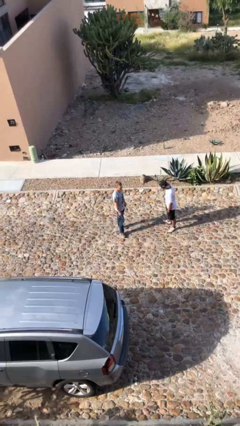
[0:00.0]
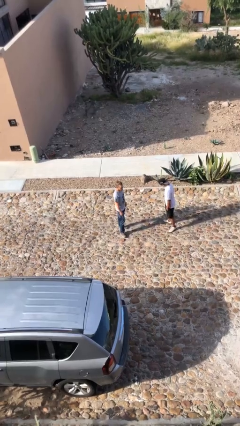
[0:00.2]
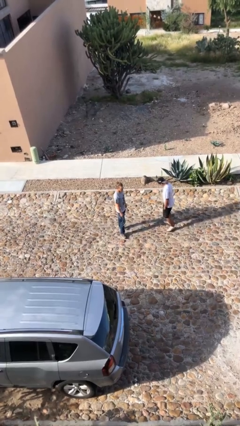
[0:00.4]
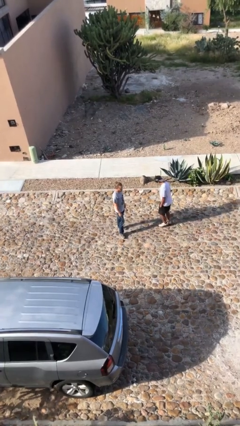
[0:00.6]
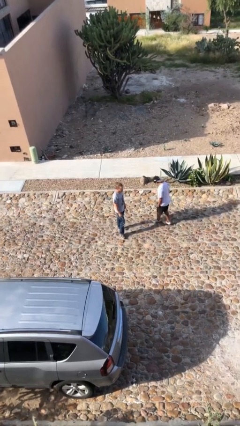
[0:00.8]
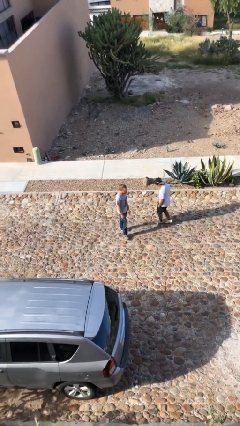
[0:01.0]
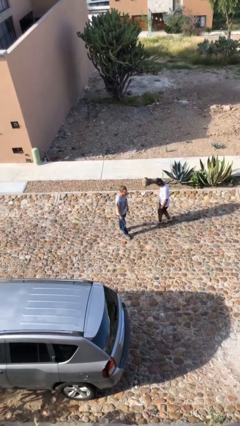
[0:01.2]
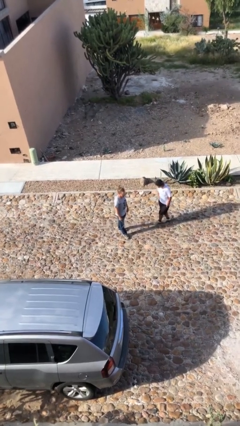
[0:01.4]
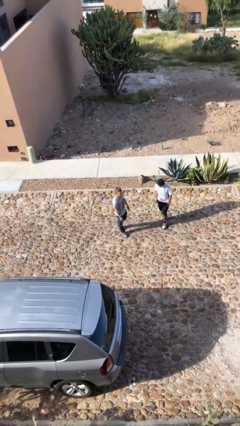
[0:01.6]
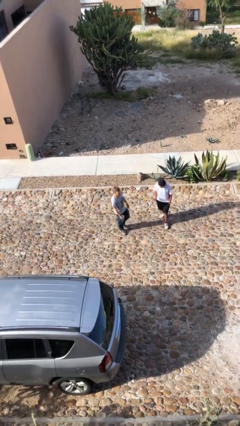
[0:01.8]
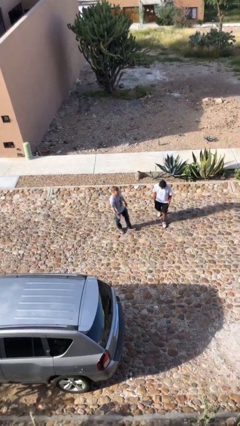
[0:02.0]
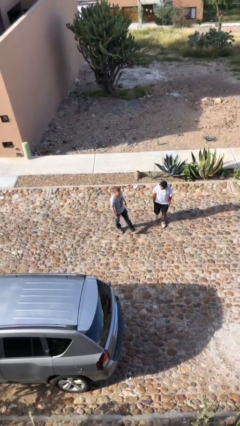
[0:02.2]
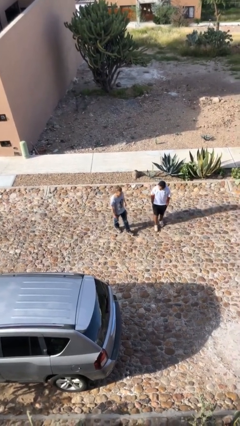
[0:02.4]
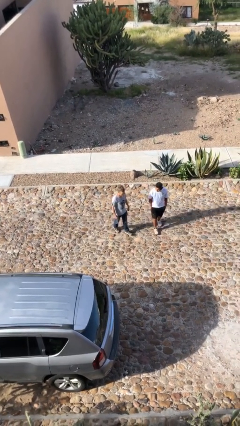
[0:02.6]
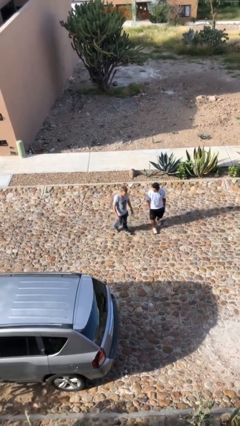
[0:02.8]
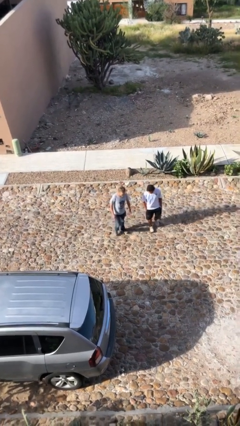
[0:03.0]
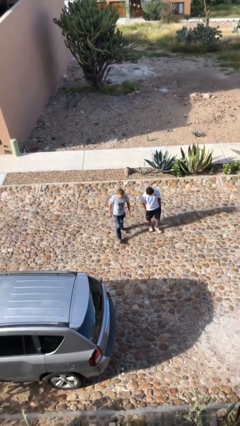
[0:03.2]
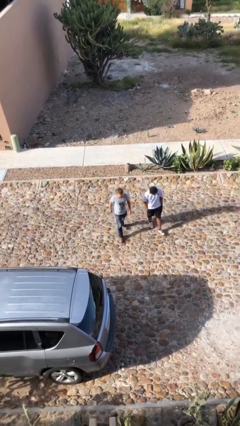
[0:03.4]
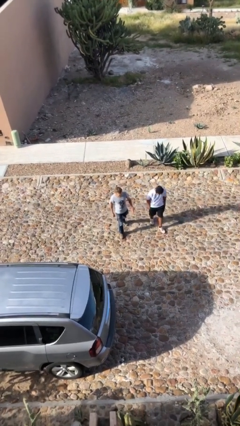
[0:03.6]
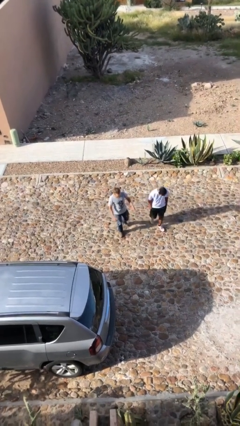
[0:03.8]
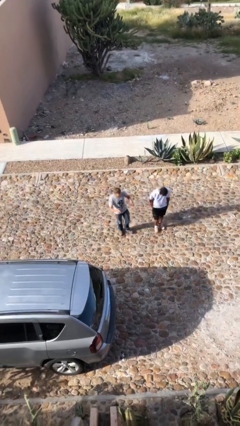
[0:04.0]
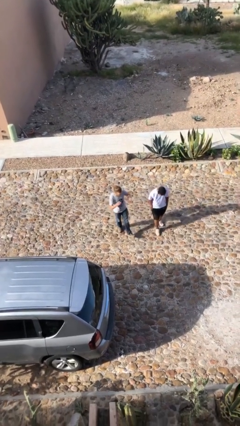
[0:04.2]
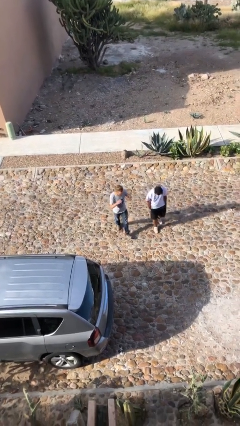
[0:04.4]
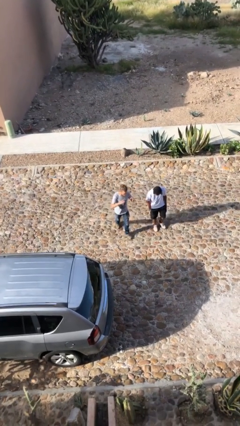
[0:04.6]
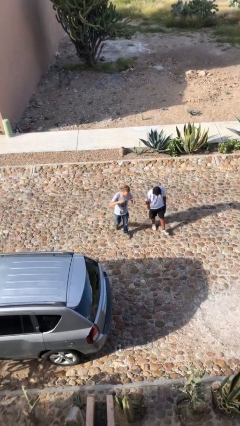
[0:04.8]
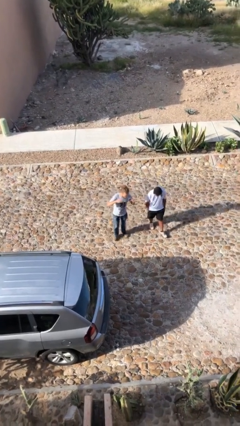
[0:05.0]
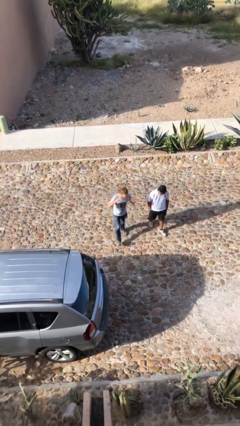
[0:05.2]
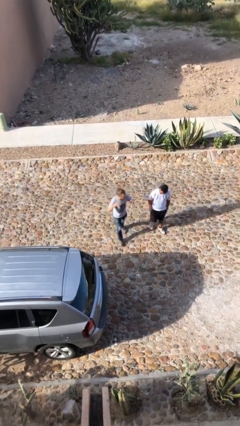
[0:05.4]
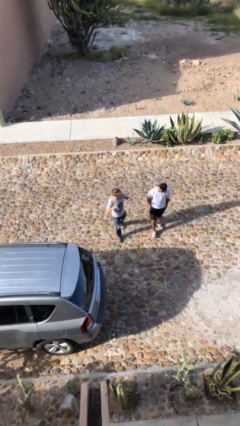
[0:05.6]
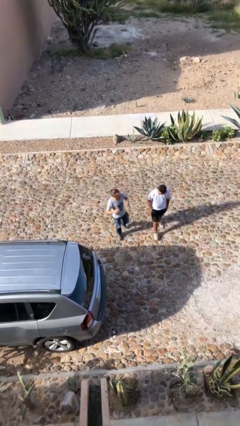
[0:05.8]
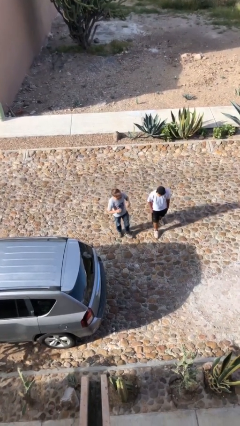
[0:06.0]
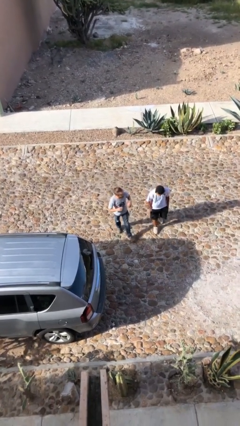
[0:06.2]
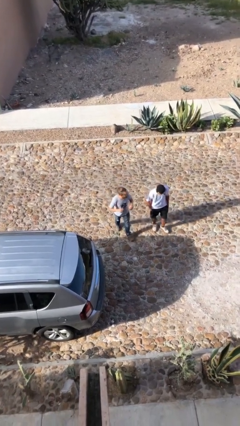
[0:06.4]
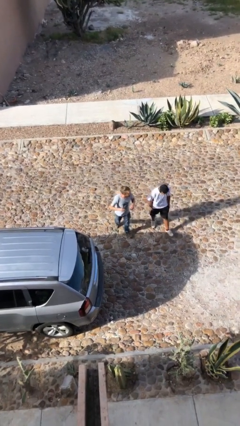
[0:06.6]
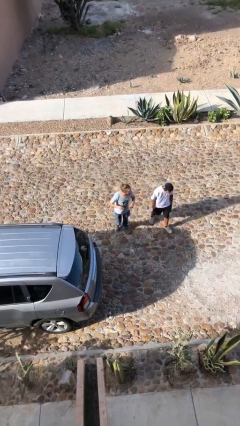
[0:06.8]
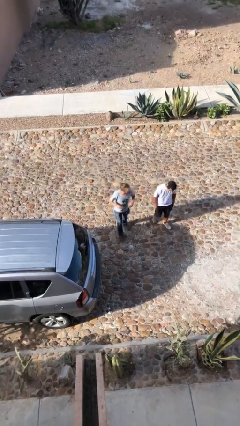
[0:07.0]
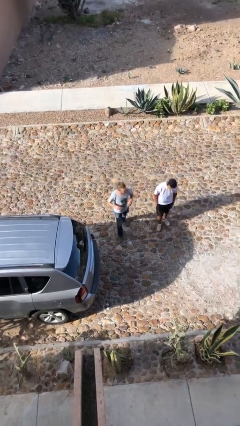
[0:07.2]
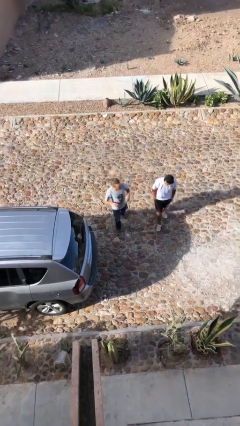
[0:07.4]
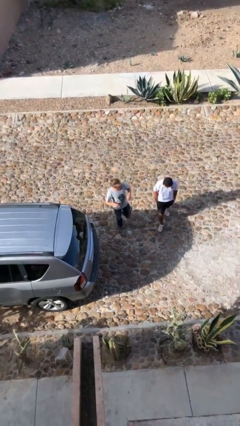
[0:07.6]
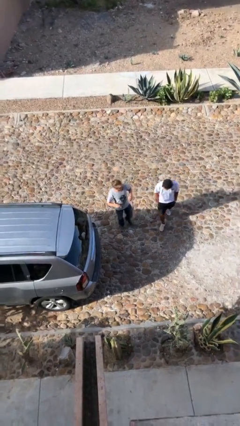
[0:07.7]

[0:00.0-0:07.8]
person talks to person

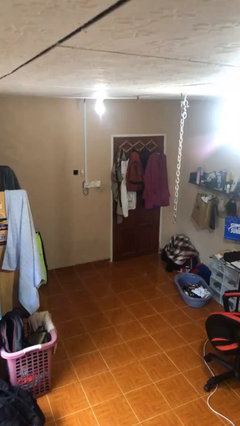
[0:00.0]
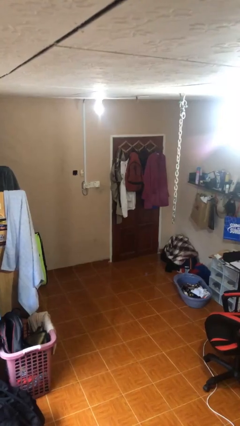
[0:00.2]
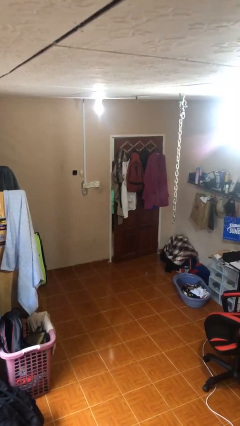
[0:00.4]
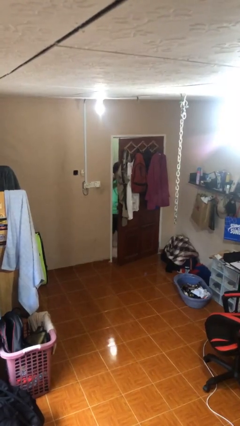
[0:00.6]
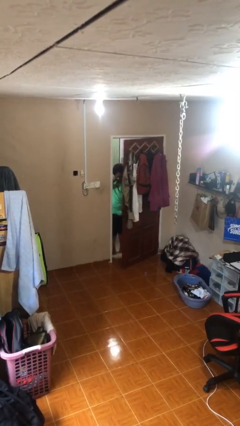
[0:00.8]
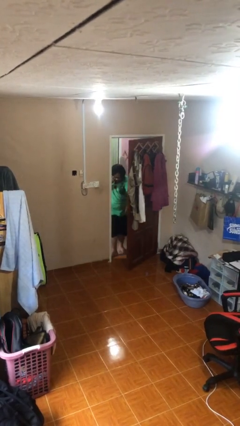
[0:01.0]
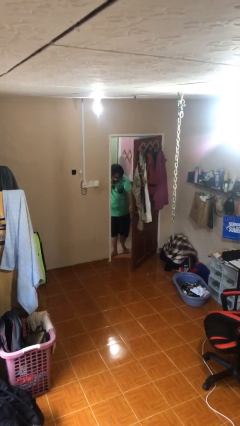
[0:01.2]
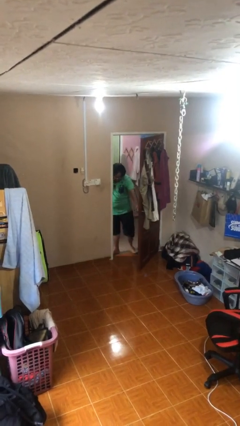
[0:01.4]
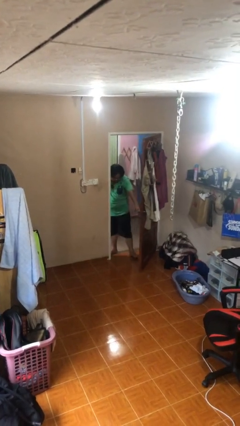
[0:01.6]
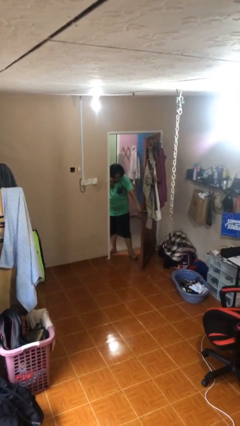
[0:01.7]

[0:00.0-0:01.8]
person opens facility door

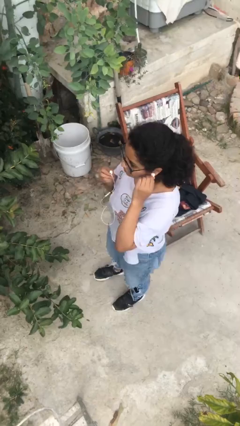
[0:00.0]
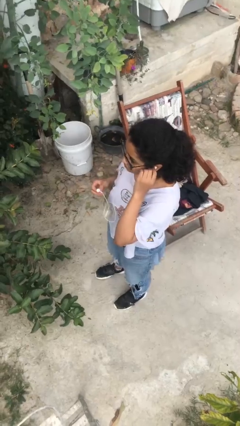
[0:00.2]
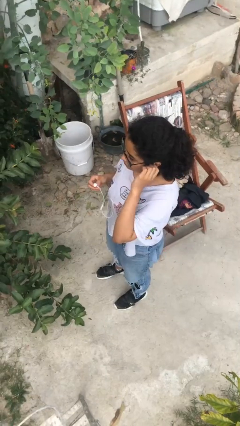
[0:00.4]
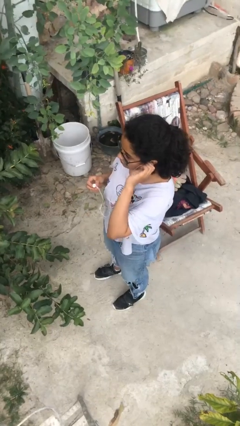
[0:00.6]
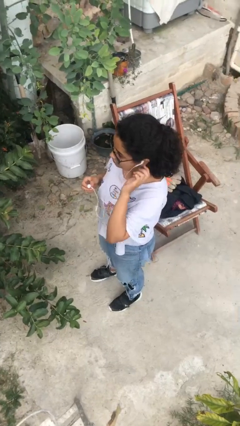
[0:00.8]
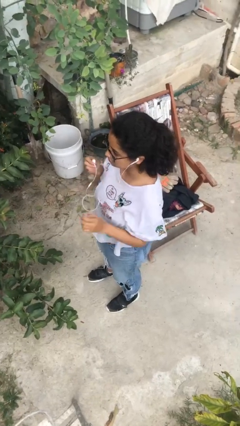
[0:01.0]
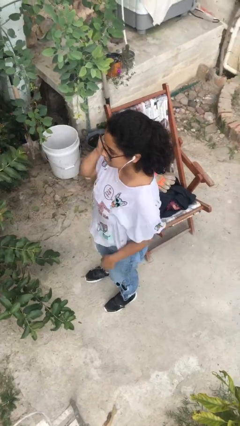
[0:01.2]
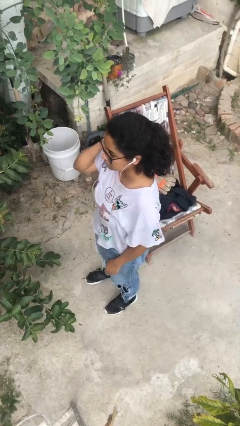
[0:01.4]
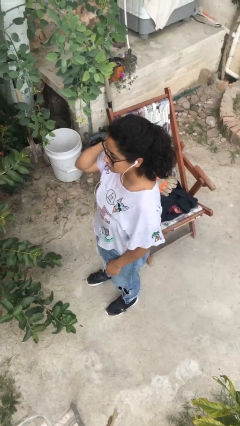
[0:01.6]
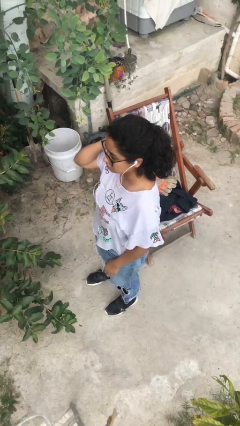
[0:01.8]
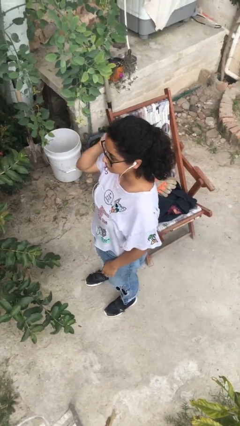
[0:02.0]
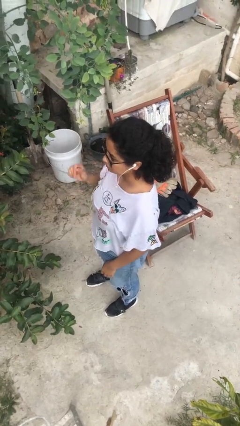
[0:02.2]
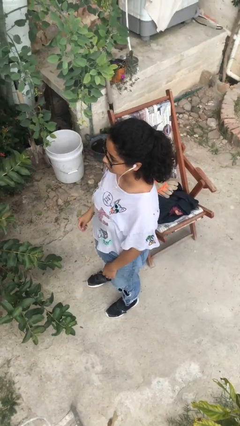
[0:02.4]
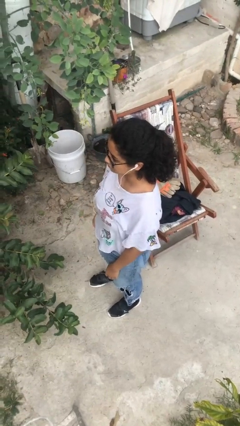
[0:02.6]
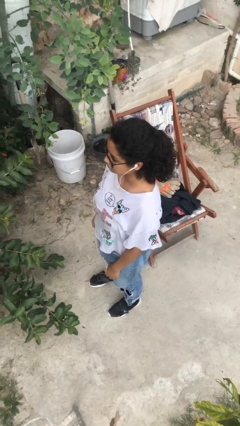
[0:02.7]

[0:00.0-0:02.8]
person puts on headphones

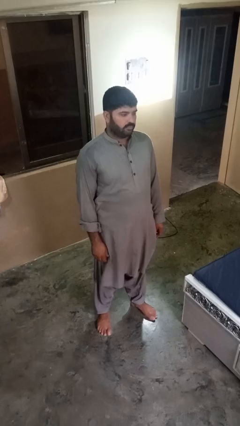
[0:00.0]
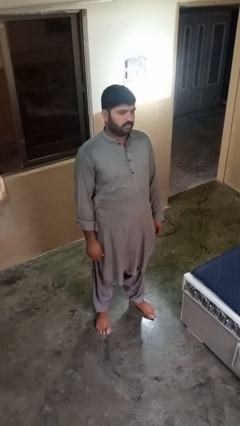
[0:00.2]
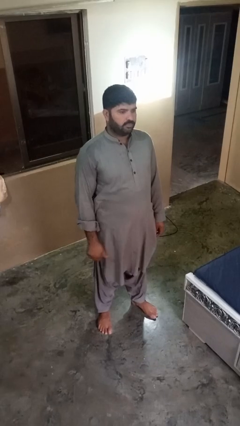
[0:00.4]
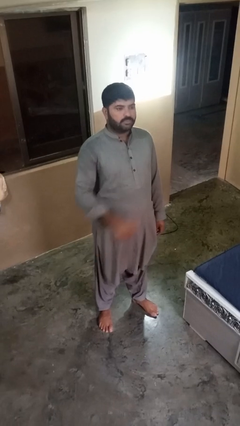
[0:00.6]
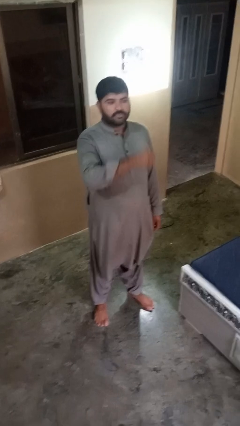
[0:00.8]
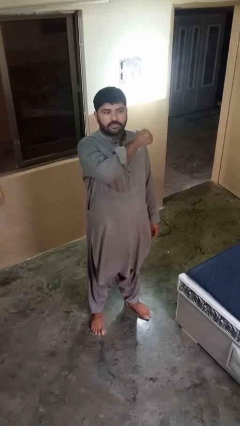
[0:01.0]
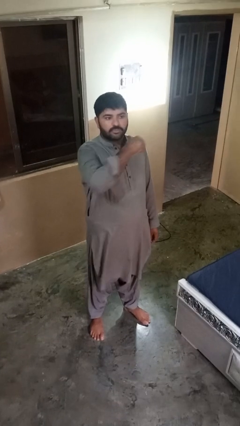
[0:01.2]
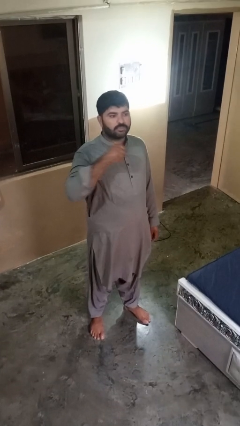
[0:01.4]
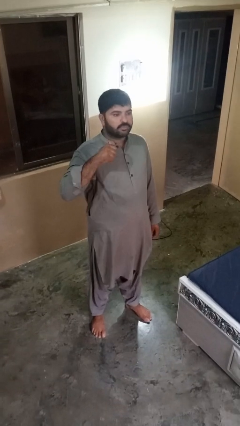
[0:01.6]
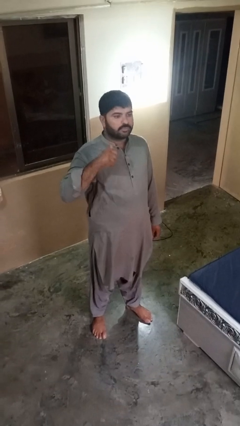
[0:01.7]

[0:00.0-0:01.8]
person gestures cut

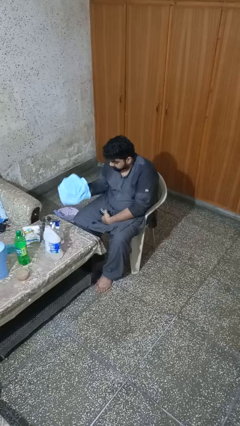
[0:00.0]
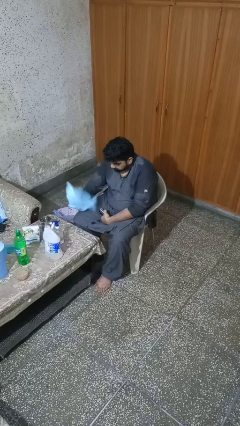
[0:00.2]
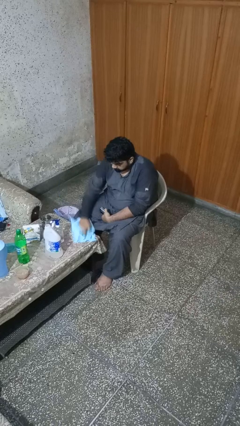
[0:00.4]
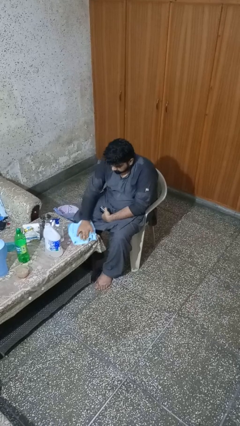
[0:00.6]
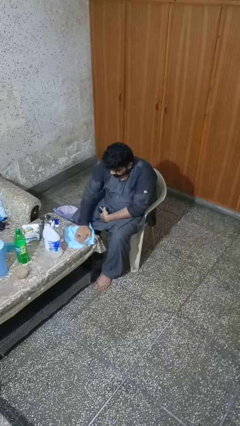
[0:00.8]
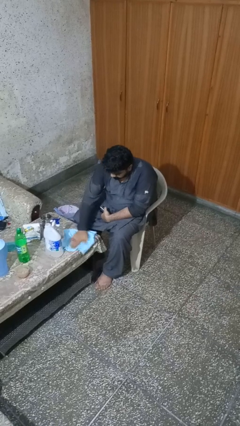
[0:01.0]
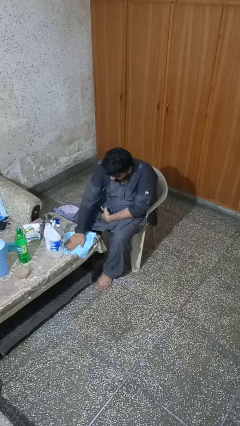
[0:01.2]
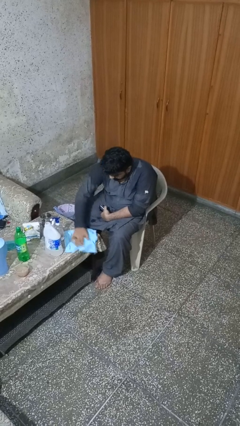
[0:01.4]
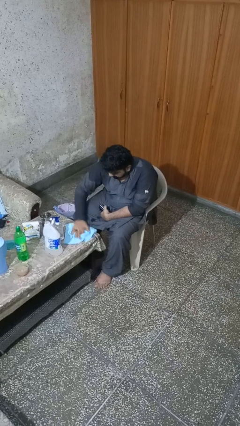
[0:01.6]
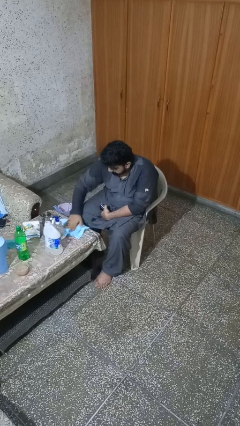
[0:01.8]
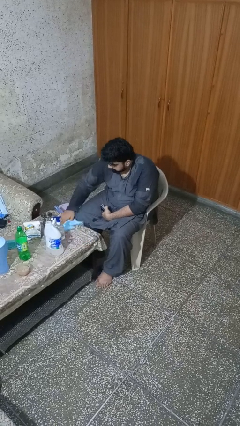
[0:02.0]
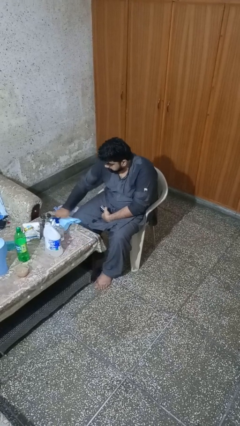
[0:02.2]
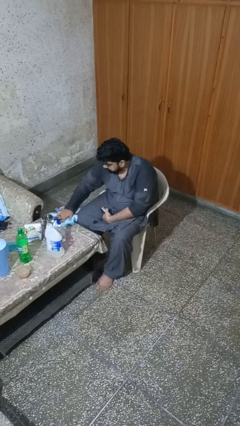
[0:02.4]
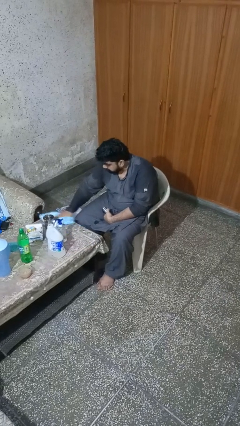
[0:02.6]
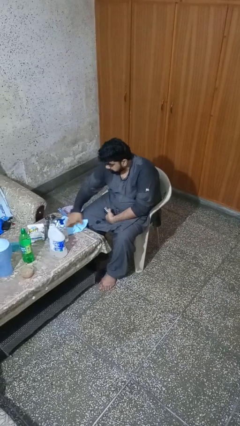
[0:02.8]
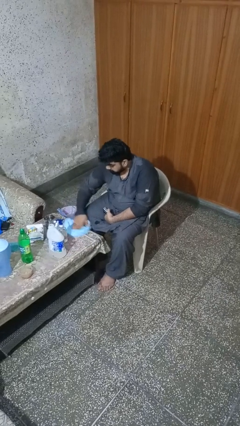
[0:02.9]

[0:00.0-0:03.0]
person cleans table with rag

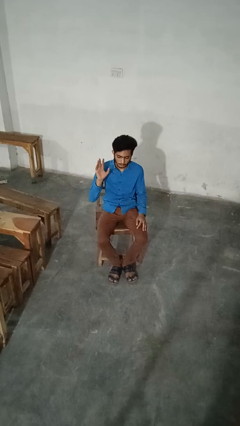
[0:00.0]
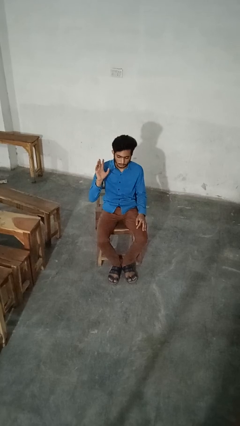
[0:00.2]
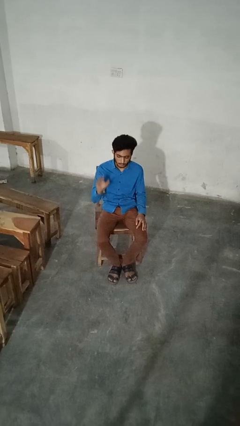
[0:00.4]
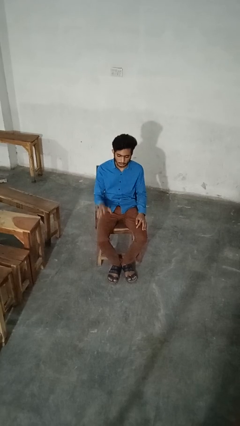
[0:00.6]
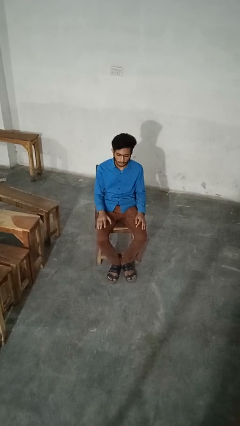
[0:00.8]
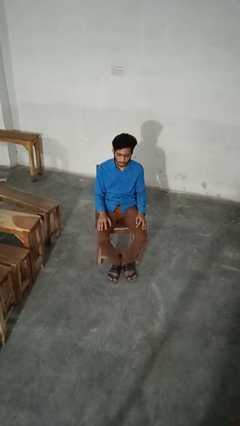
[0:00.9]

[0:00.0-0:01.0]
person gestures lower hand
